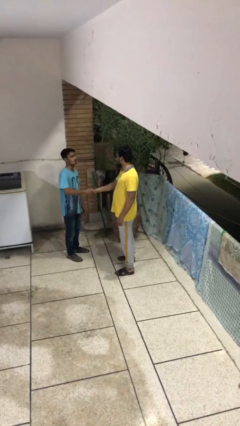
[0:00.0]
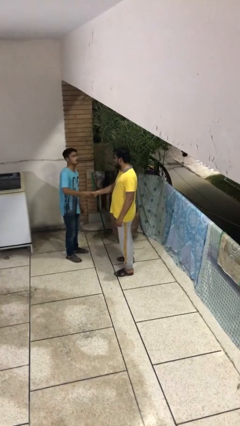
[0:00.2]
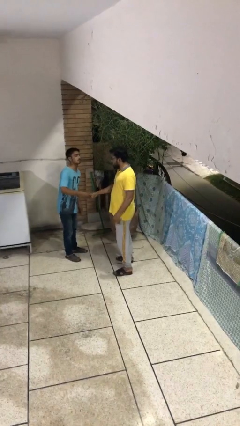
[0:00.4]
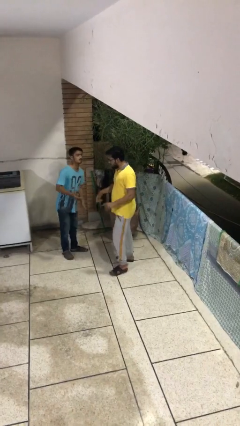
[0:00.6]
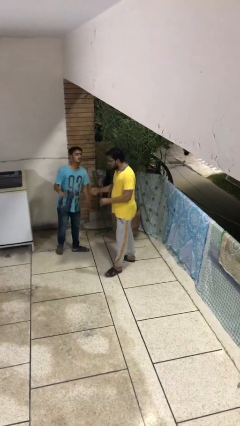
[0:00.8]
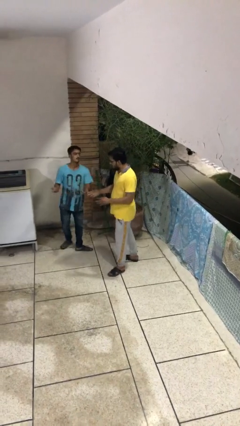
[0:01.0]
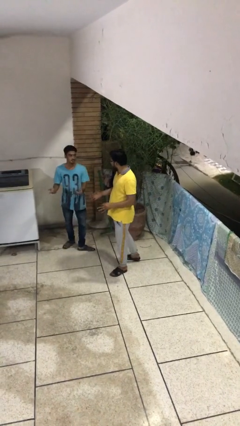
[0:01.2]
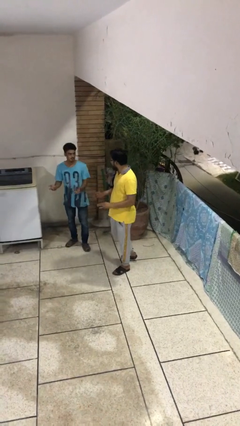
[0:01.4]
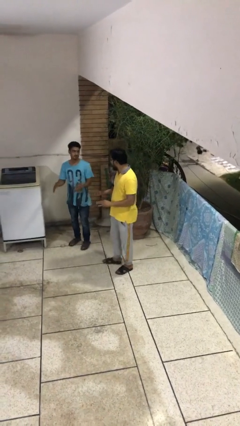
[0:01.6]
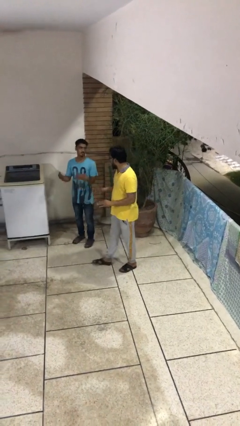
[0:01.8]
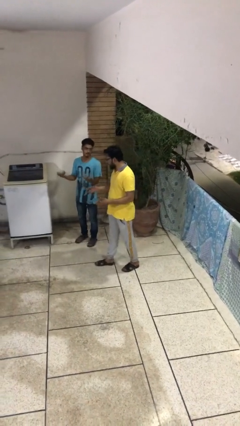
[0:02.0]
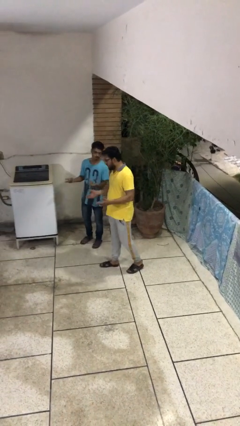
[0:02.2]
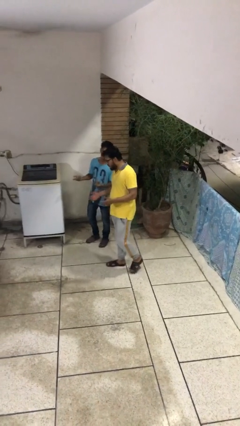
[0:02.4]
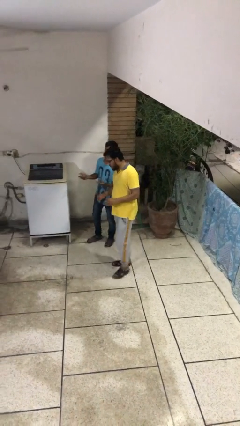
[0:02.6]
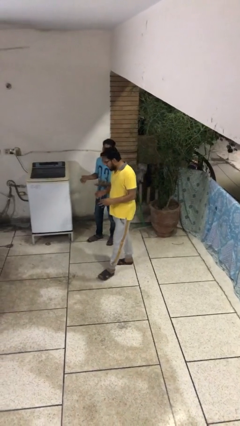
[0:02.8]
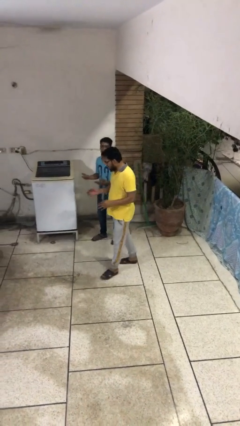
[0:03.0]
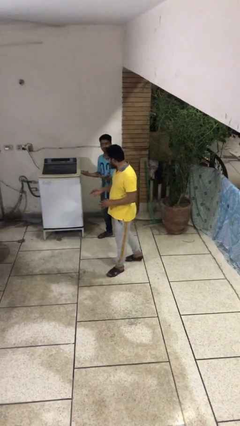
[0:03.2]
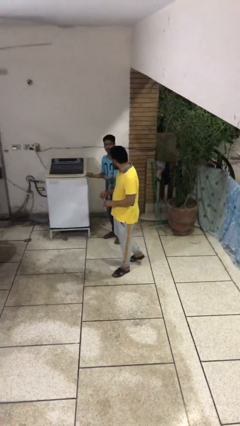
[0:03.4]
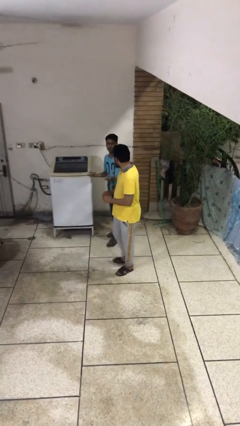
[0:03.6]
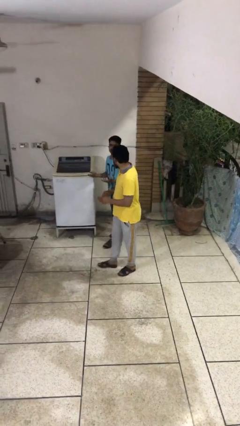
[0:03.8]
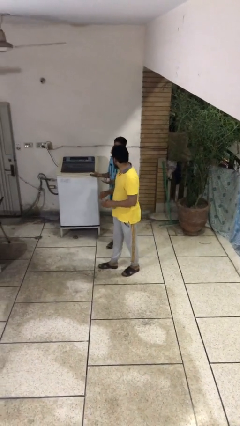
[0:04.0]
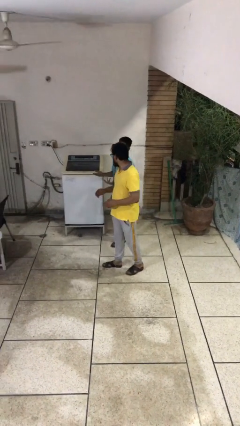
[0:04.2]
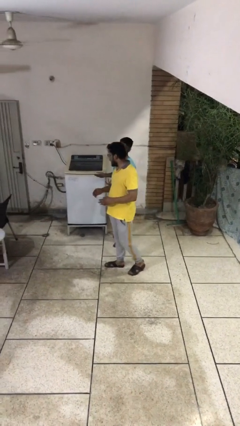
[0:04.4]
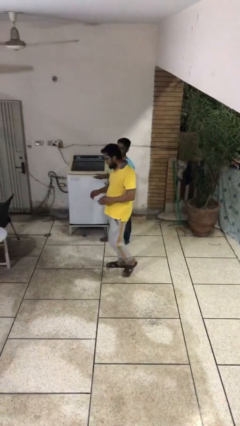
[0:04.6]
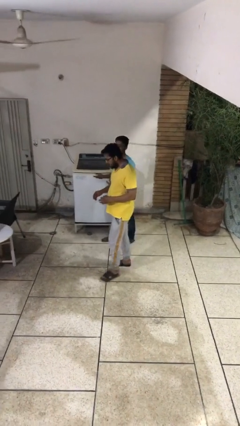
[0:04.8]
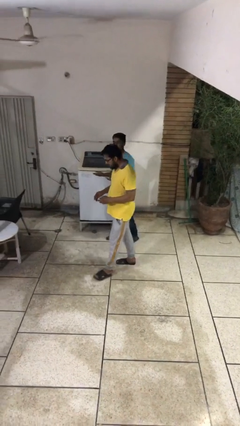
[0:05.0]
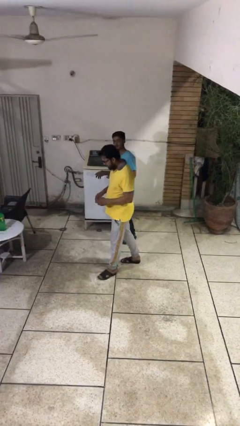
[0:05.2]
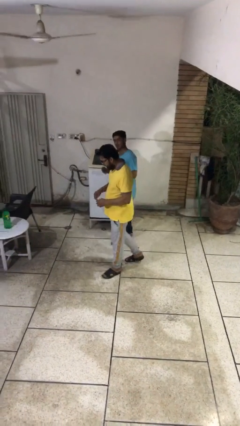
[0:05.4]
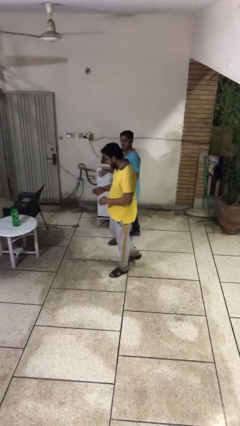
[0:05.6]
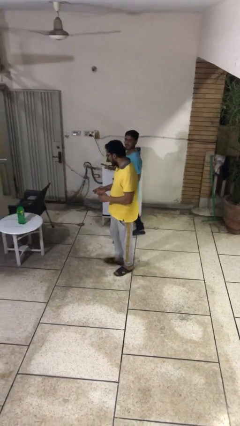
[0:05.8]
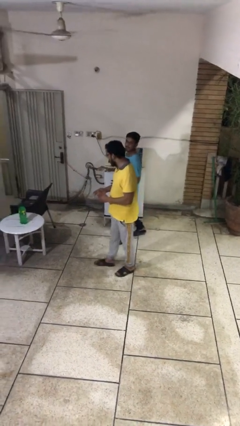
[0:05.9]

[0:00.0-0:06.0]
person talks to person

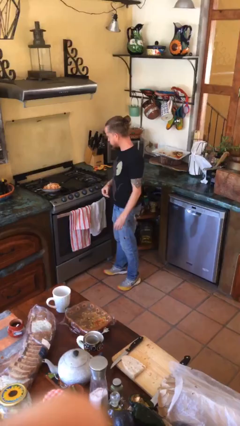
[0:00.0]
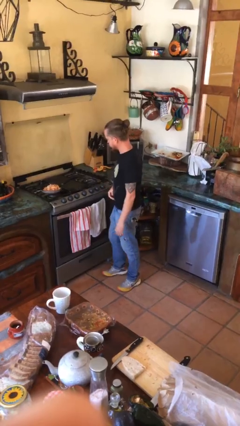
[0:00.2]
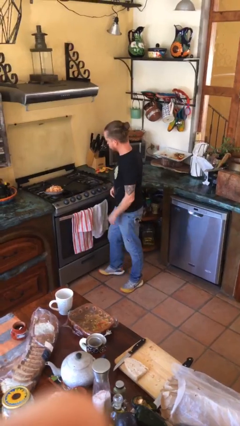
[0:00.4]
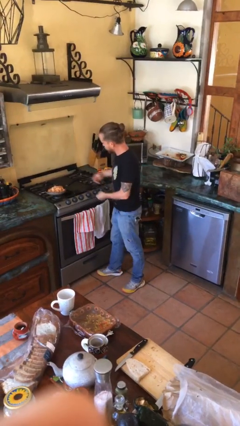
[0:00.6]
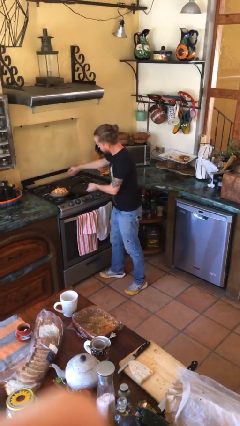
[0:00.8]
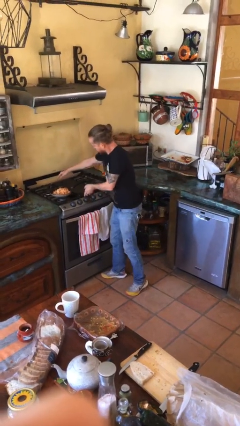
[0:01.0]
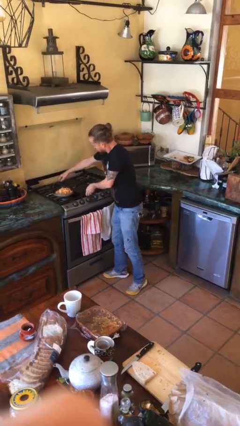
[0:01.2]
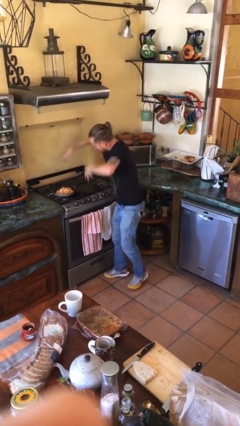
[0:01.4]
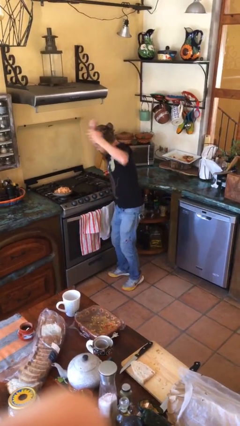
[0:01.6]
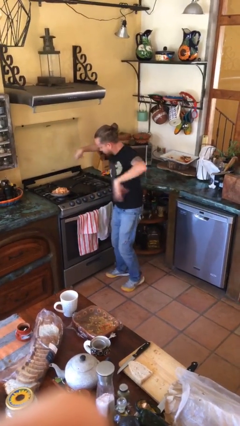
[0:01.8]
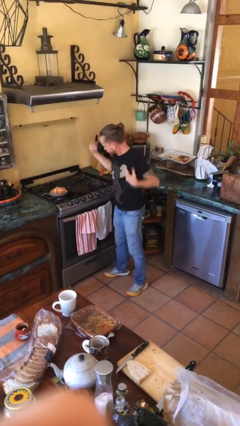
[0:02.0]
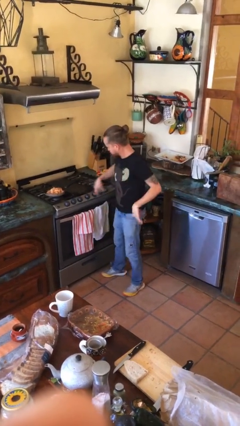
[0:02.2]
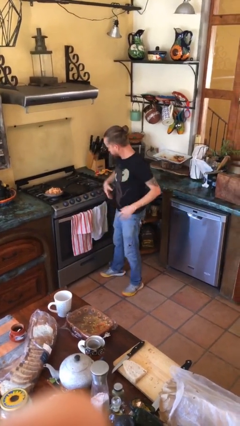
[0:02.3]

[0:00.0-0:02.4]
person burns hand

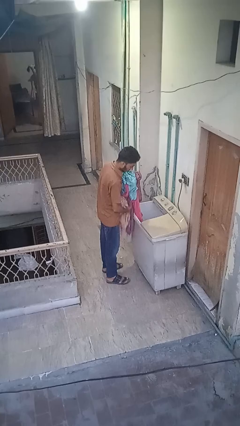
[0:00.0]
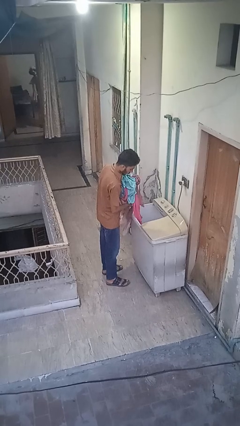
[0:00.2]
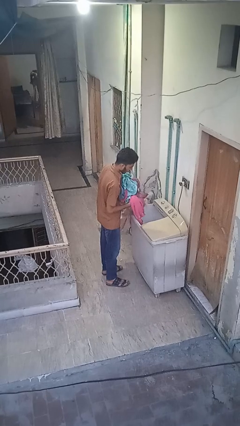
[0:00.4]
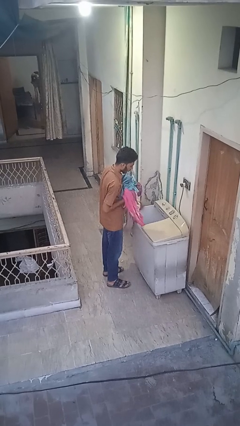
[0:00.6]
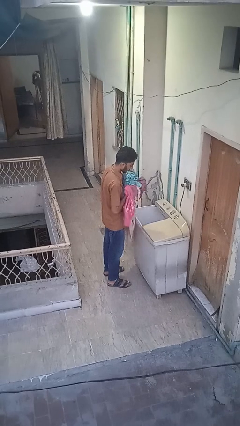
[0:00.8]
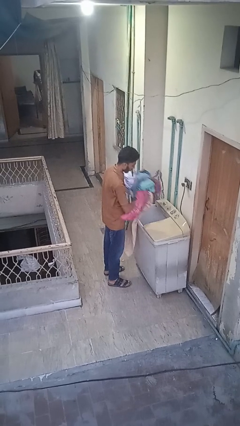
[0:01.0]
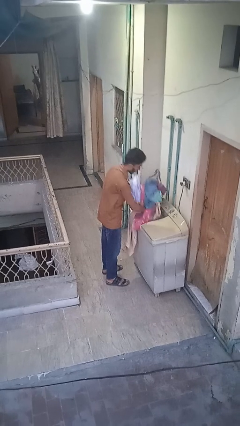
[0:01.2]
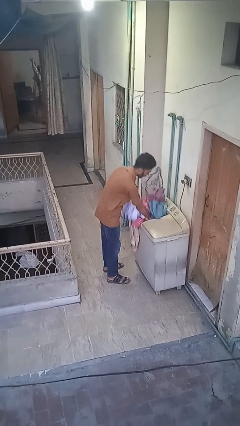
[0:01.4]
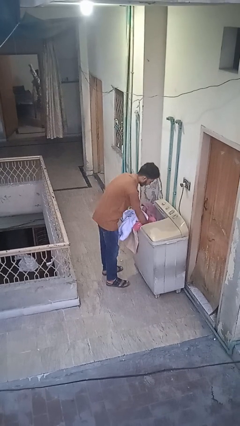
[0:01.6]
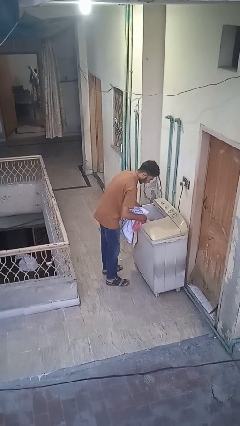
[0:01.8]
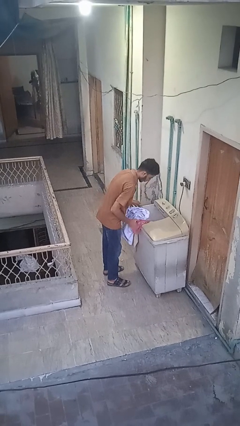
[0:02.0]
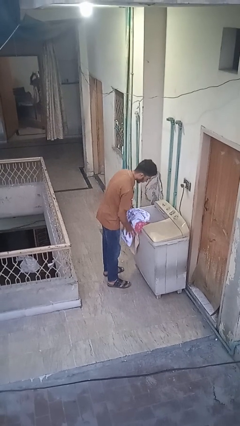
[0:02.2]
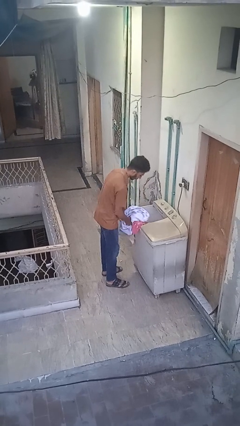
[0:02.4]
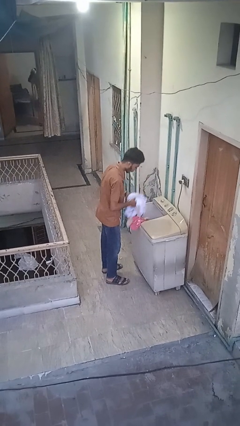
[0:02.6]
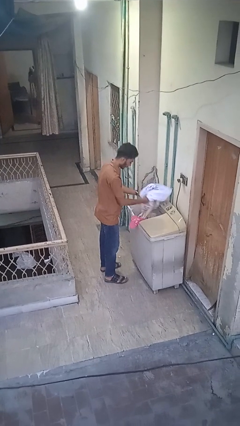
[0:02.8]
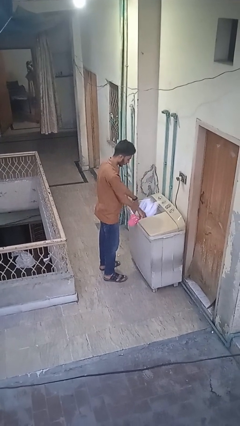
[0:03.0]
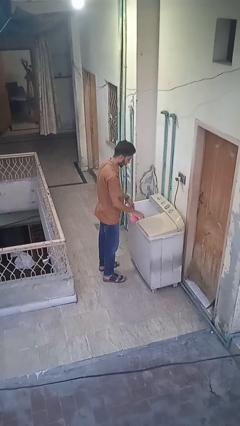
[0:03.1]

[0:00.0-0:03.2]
person loads clotheswasher

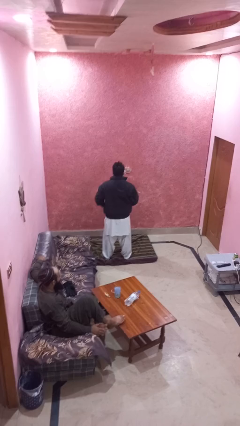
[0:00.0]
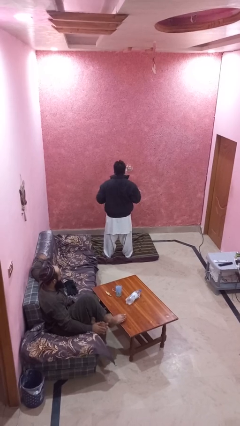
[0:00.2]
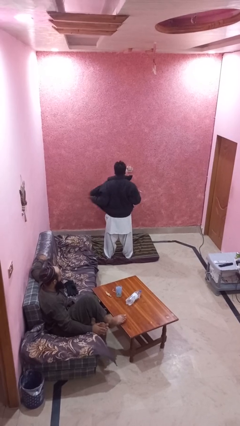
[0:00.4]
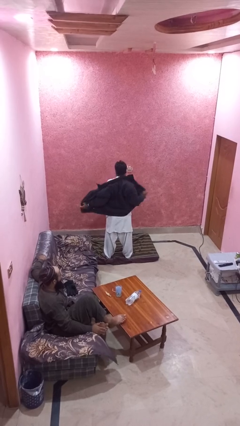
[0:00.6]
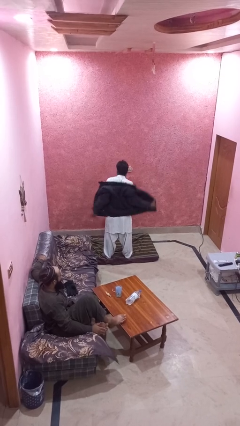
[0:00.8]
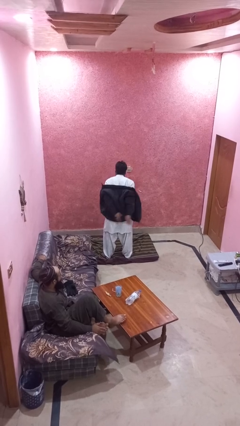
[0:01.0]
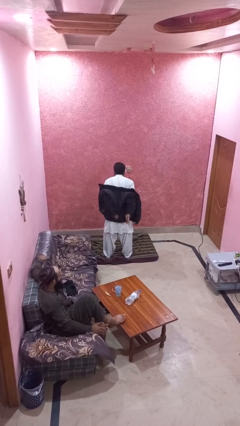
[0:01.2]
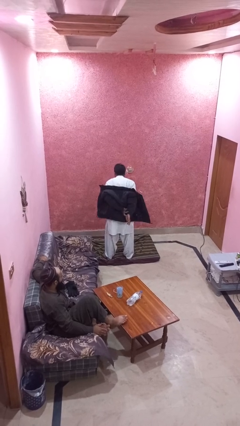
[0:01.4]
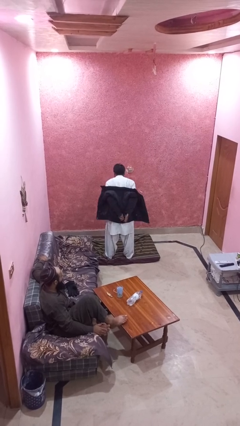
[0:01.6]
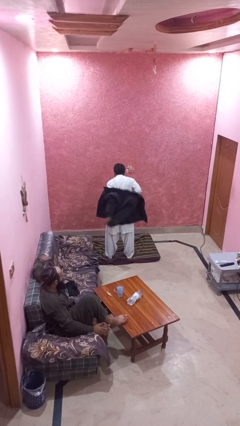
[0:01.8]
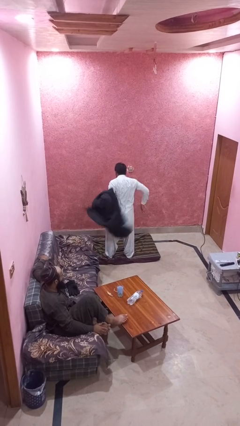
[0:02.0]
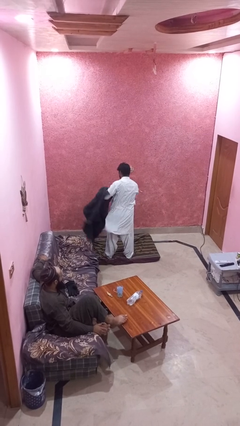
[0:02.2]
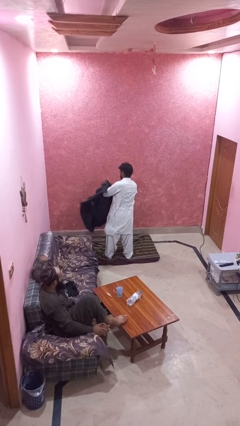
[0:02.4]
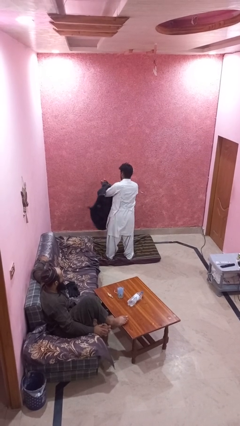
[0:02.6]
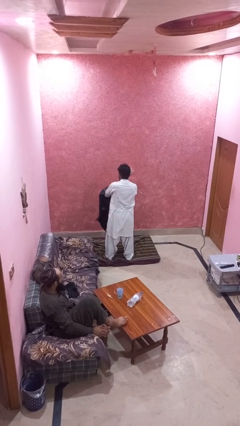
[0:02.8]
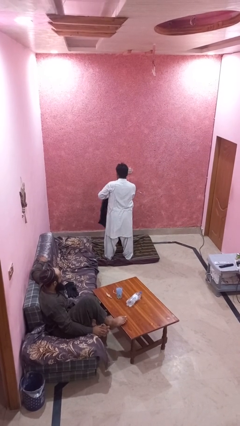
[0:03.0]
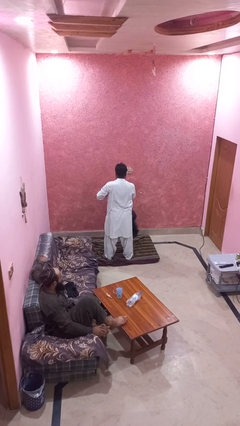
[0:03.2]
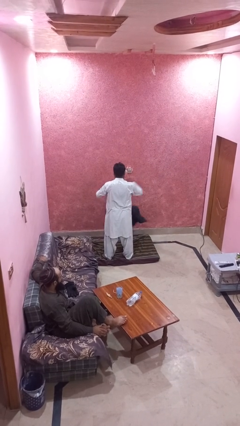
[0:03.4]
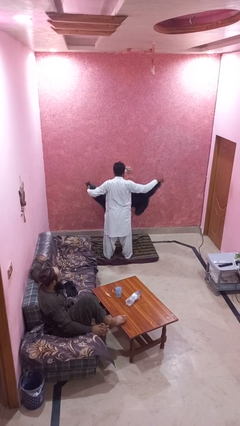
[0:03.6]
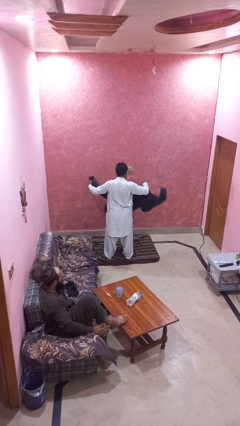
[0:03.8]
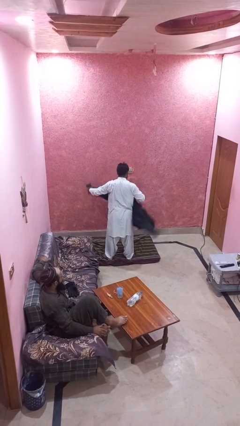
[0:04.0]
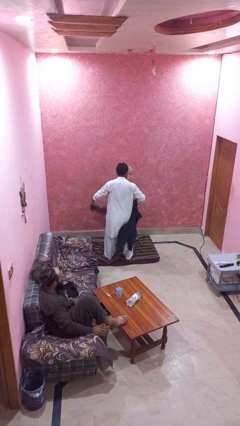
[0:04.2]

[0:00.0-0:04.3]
person takes off jacket

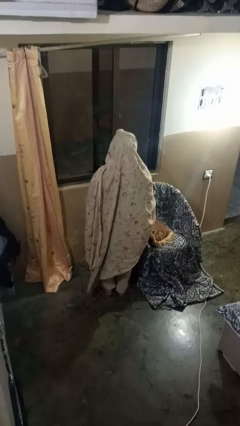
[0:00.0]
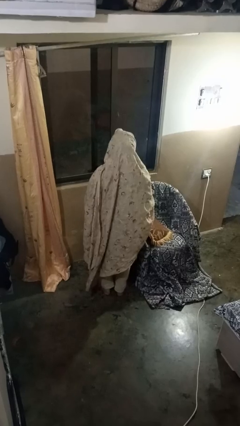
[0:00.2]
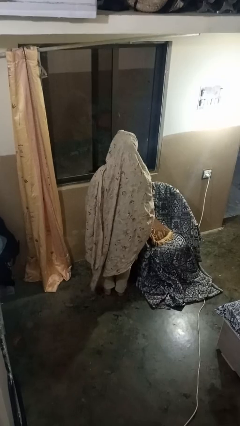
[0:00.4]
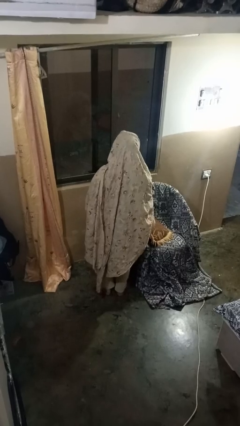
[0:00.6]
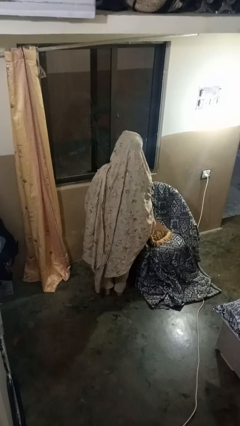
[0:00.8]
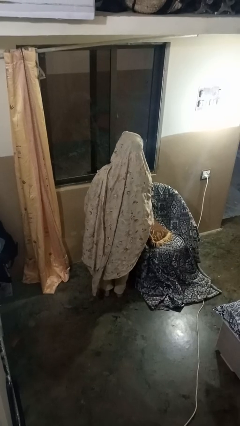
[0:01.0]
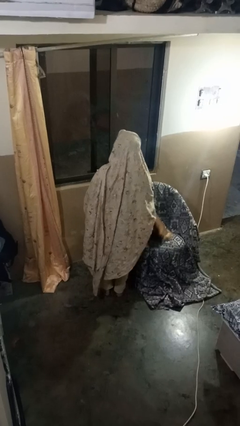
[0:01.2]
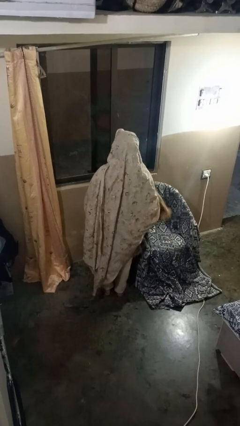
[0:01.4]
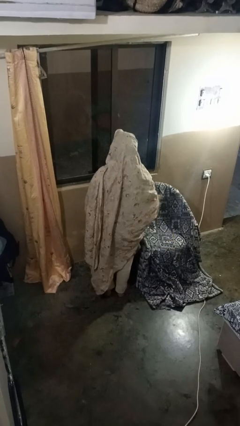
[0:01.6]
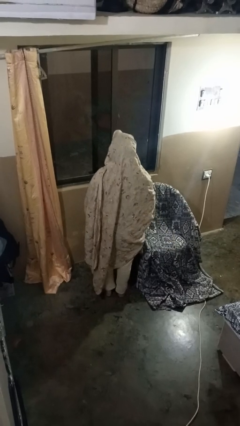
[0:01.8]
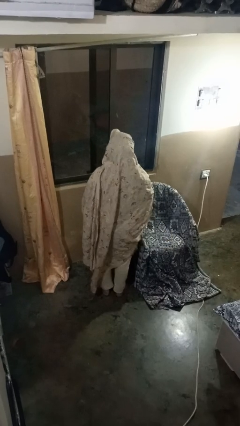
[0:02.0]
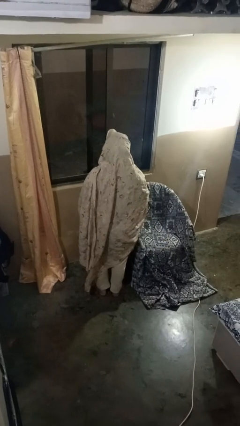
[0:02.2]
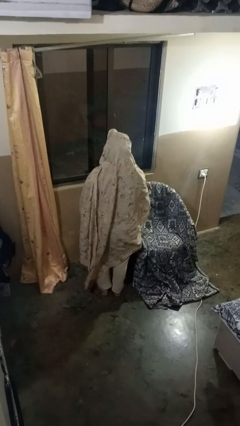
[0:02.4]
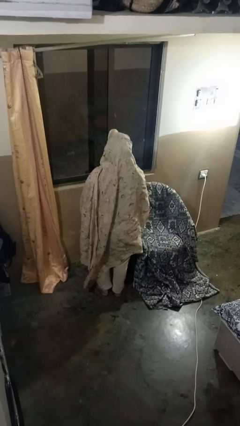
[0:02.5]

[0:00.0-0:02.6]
person picks up object from couch
